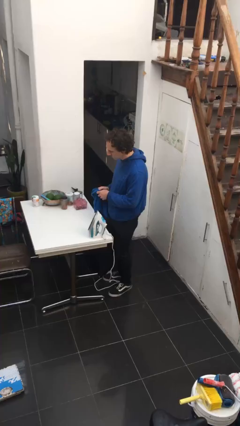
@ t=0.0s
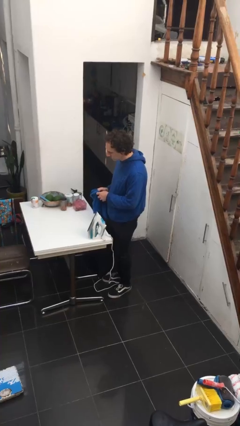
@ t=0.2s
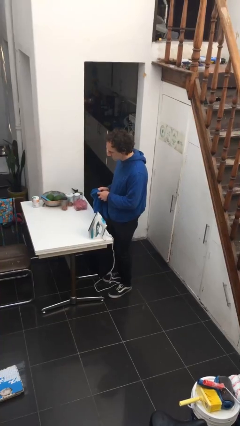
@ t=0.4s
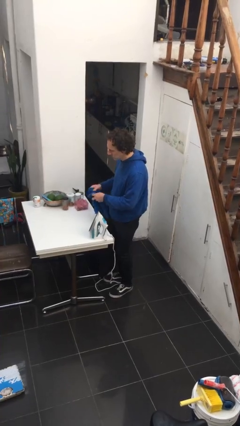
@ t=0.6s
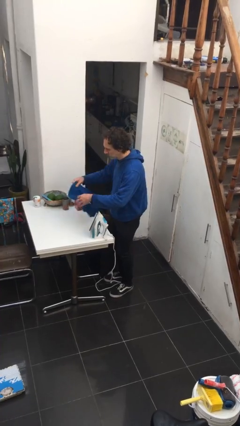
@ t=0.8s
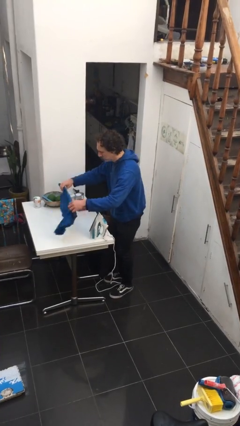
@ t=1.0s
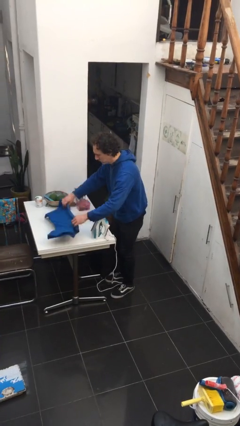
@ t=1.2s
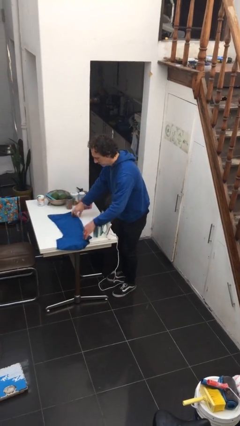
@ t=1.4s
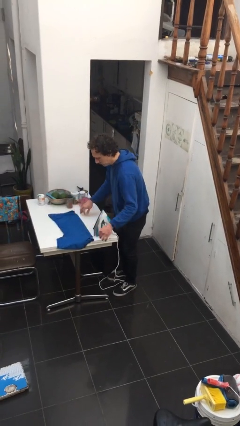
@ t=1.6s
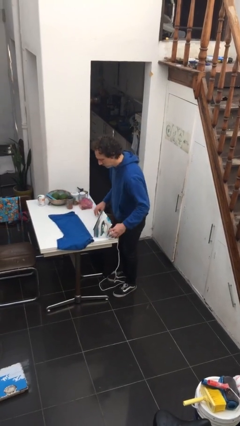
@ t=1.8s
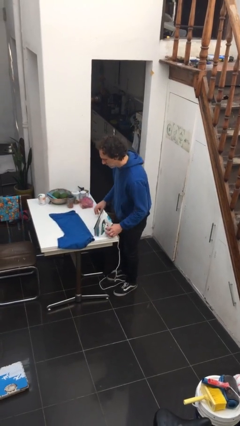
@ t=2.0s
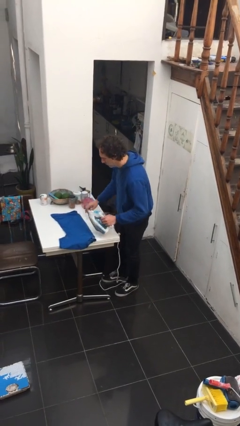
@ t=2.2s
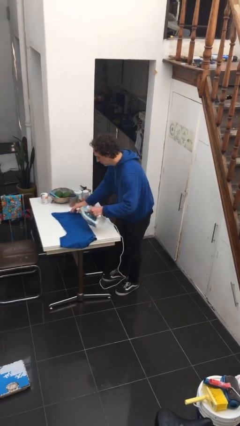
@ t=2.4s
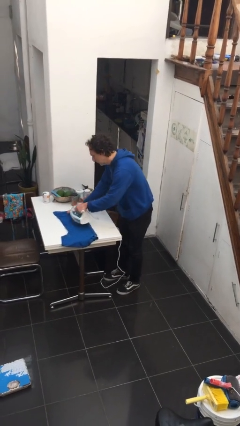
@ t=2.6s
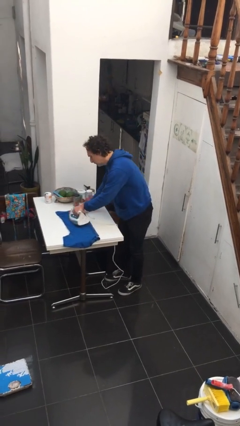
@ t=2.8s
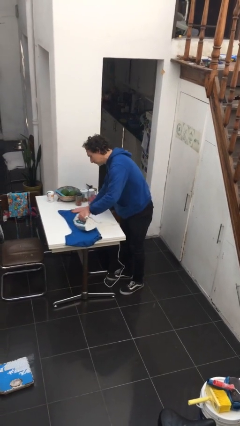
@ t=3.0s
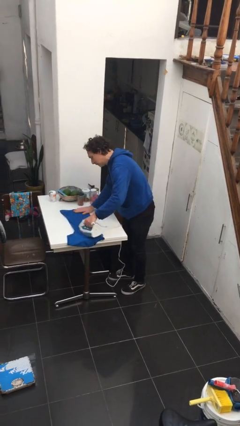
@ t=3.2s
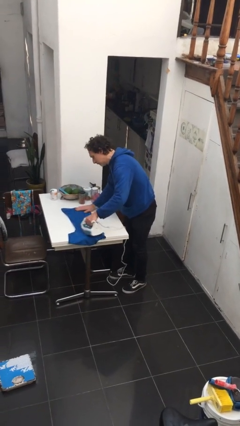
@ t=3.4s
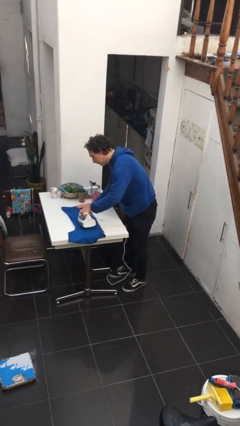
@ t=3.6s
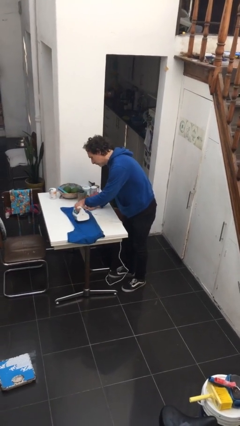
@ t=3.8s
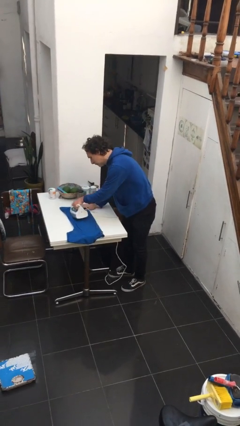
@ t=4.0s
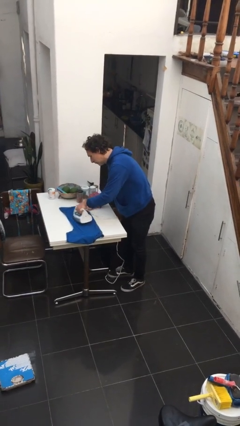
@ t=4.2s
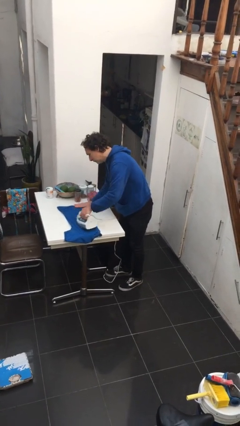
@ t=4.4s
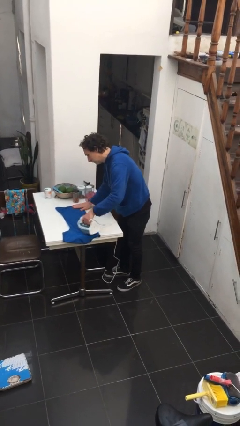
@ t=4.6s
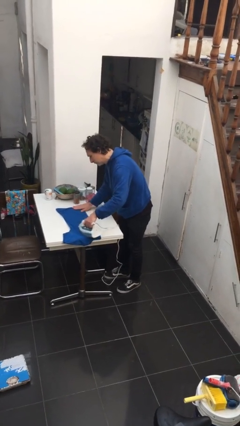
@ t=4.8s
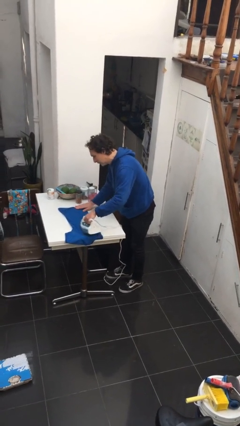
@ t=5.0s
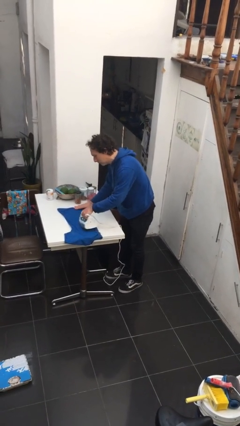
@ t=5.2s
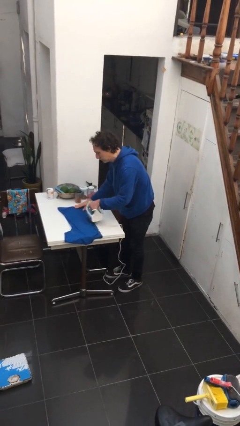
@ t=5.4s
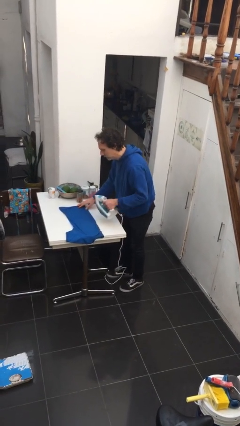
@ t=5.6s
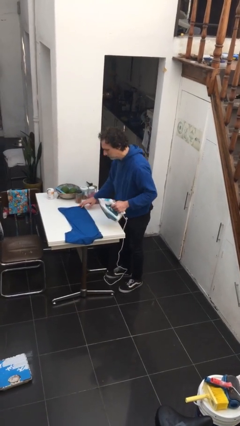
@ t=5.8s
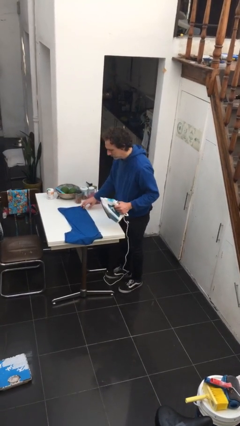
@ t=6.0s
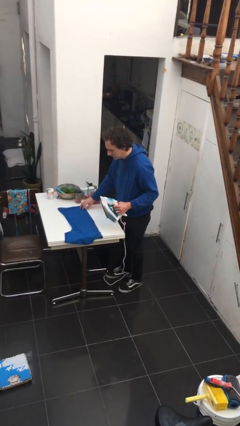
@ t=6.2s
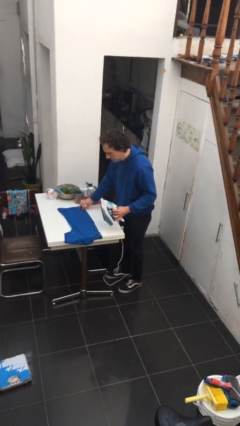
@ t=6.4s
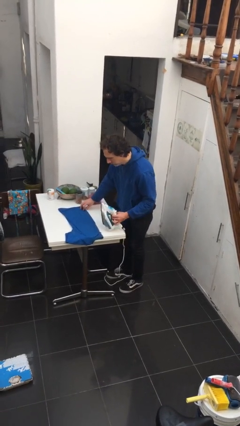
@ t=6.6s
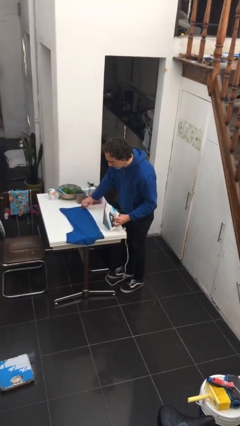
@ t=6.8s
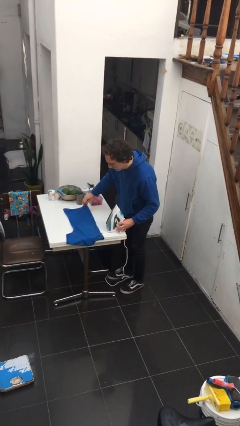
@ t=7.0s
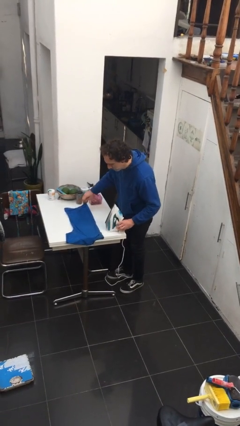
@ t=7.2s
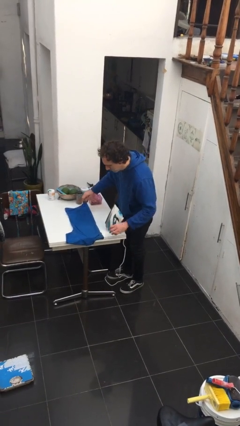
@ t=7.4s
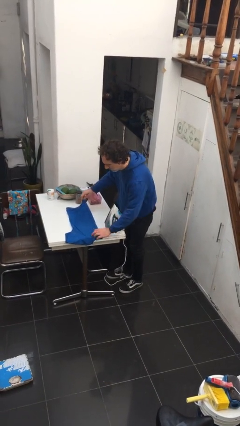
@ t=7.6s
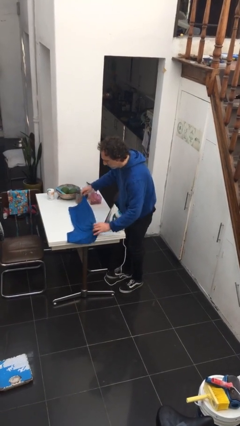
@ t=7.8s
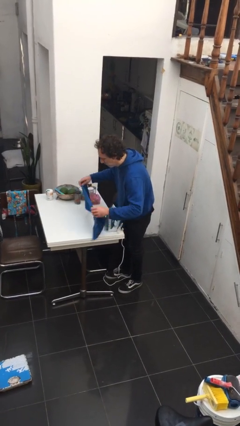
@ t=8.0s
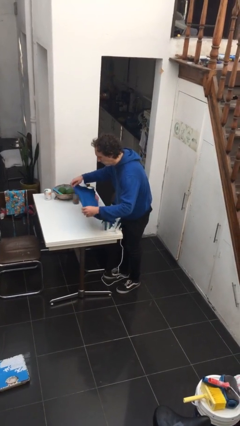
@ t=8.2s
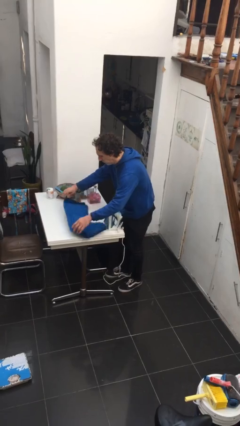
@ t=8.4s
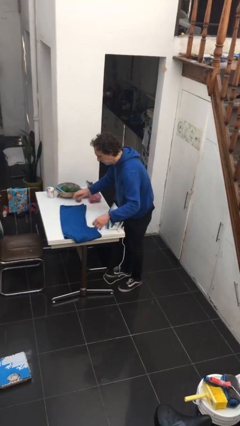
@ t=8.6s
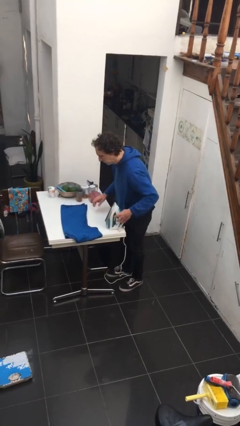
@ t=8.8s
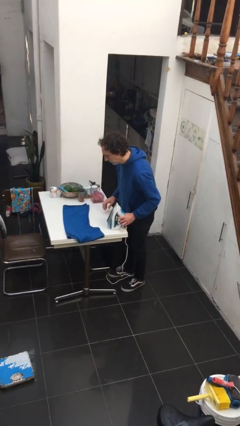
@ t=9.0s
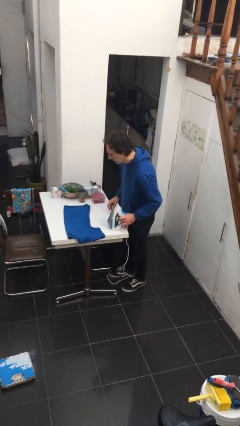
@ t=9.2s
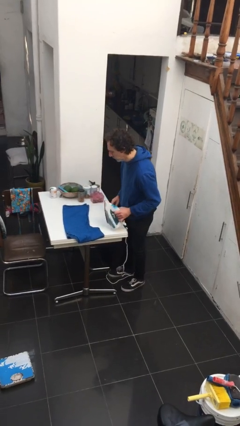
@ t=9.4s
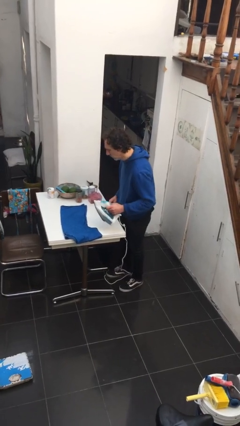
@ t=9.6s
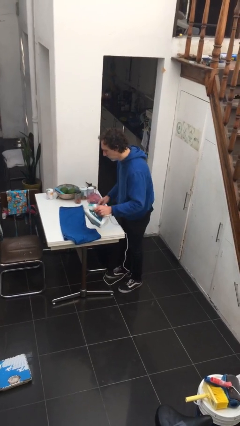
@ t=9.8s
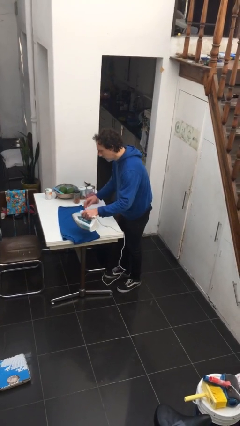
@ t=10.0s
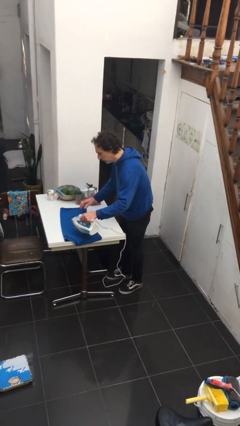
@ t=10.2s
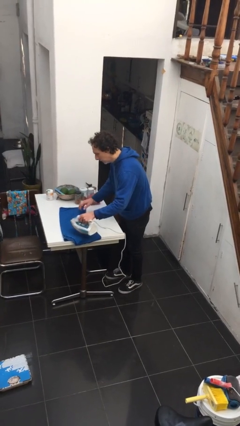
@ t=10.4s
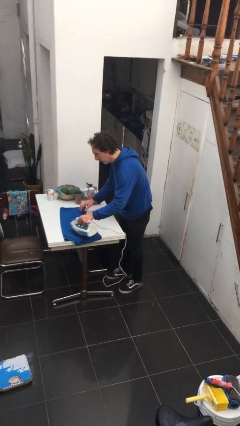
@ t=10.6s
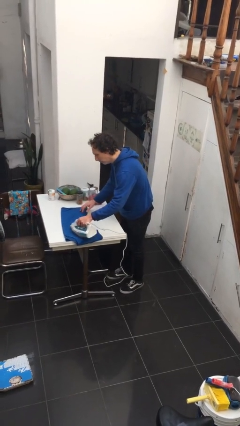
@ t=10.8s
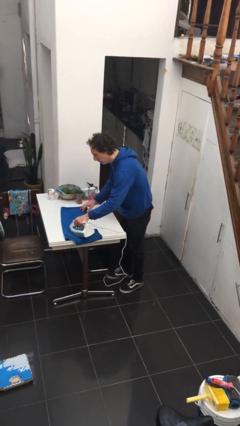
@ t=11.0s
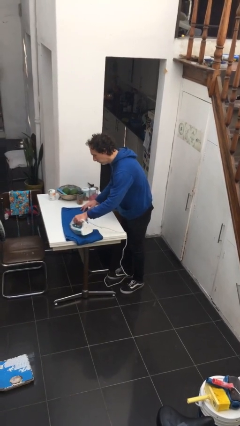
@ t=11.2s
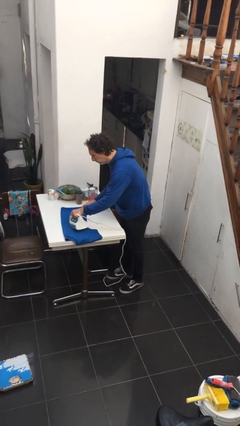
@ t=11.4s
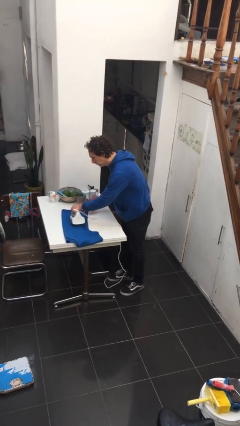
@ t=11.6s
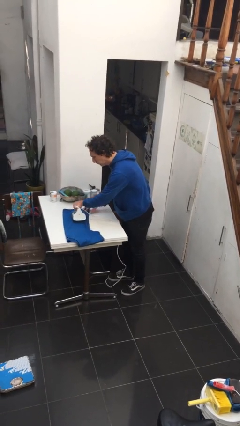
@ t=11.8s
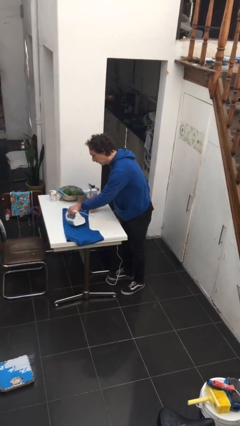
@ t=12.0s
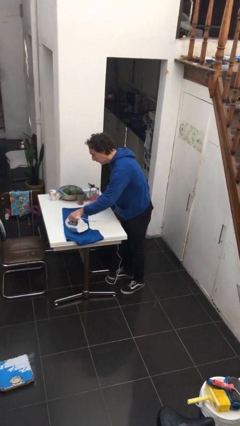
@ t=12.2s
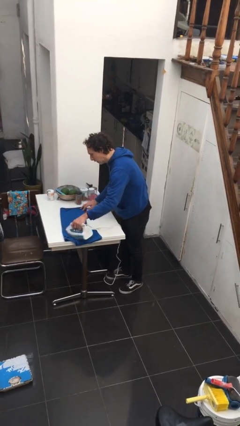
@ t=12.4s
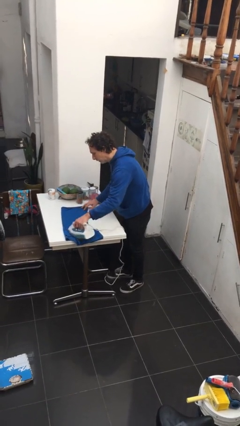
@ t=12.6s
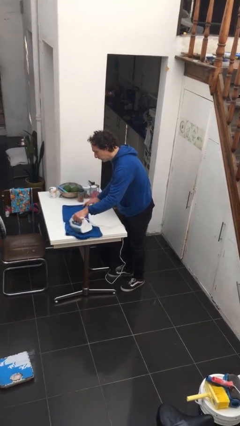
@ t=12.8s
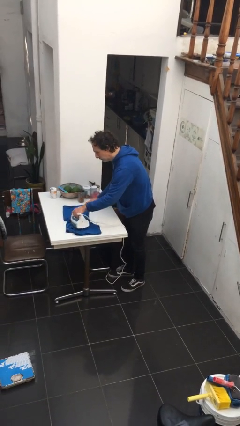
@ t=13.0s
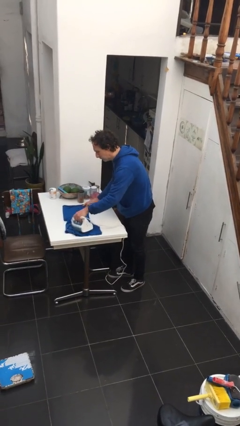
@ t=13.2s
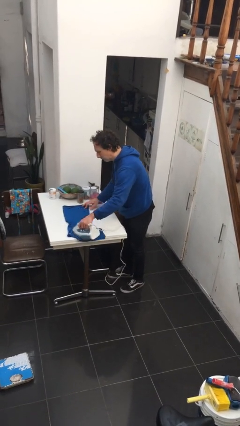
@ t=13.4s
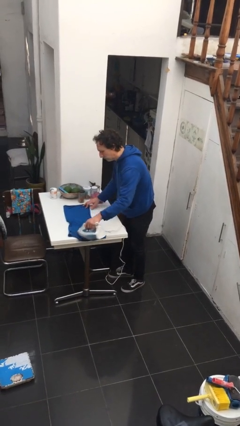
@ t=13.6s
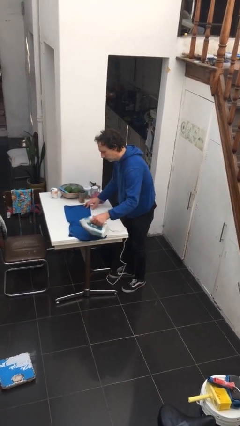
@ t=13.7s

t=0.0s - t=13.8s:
person irons clothes

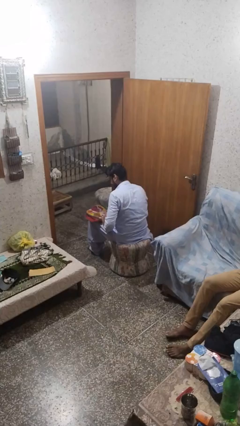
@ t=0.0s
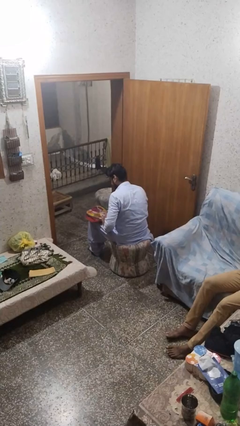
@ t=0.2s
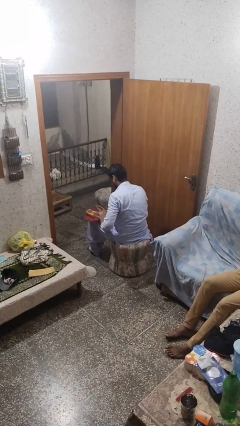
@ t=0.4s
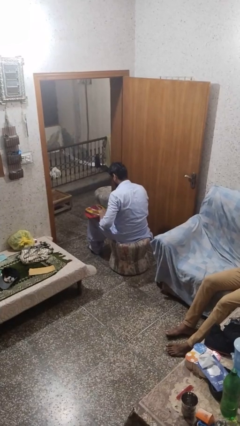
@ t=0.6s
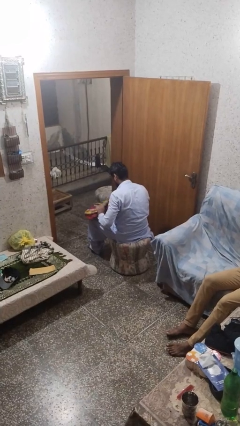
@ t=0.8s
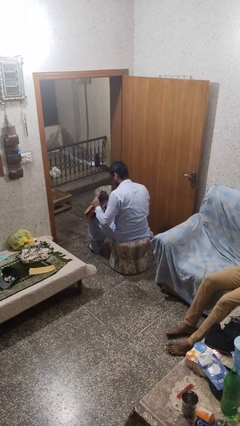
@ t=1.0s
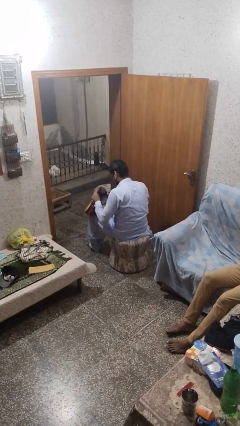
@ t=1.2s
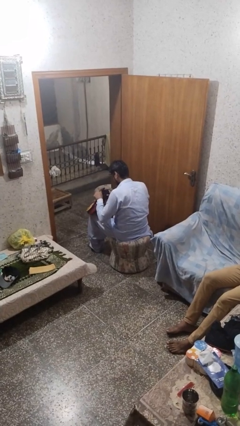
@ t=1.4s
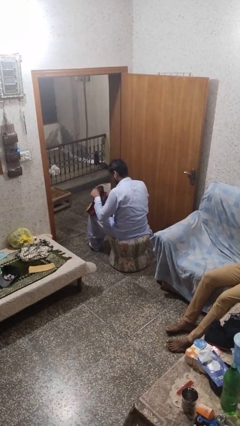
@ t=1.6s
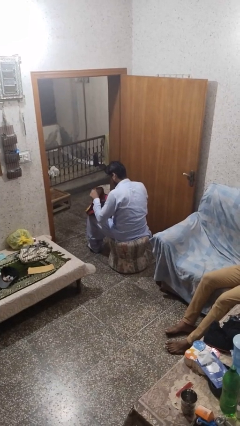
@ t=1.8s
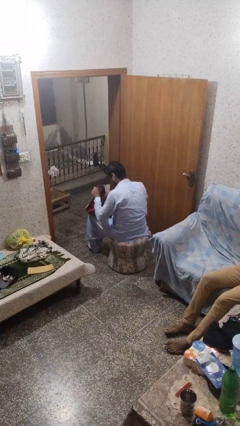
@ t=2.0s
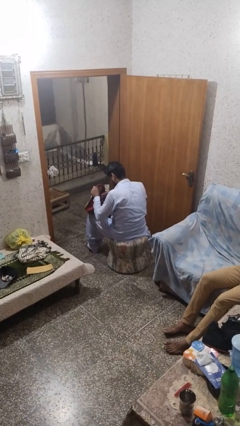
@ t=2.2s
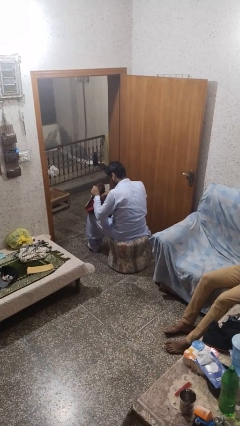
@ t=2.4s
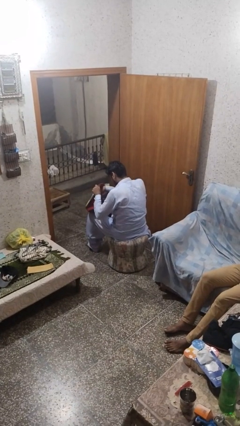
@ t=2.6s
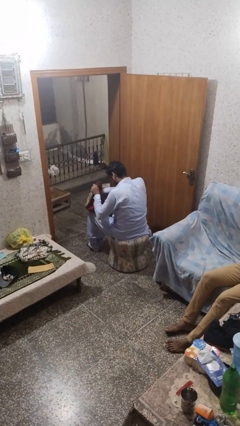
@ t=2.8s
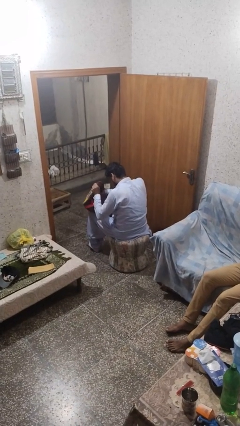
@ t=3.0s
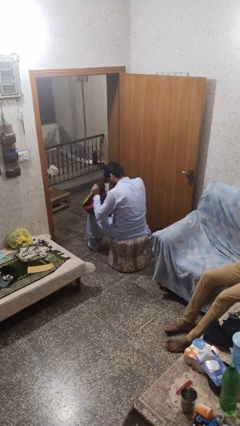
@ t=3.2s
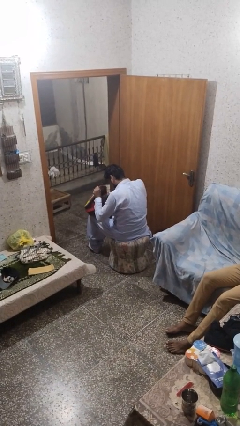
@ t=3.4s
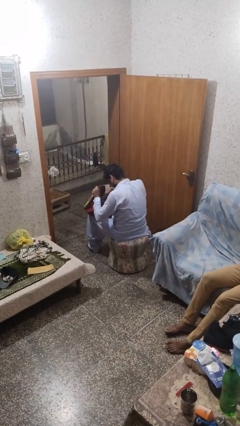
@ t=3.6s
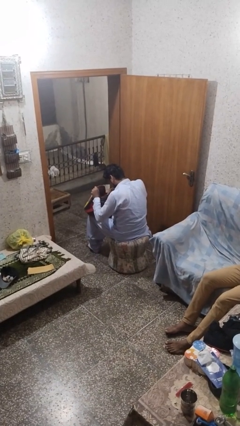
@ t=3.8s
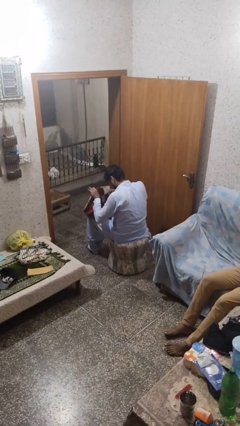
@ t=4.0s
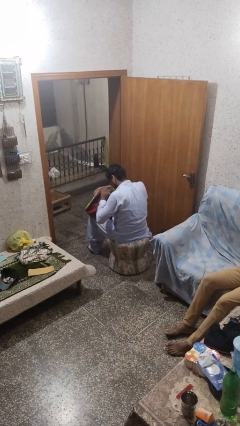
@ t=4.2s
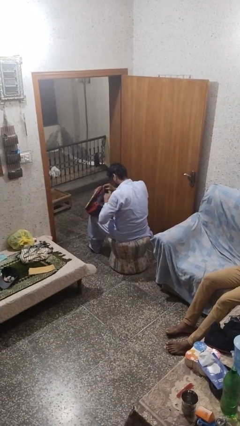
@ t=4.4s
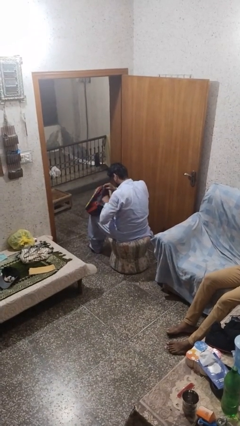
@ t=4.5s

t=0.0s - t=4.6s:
person searches in backpack
